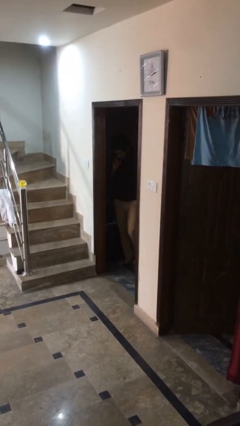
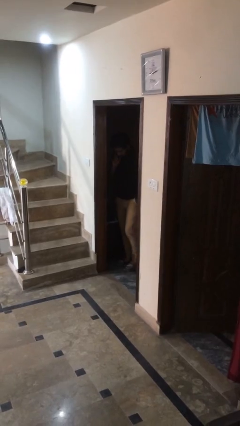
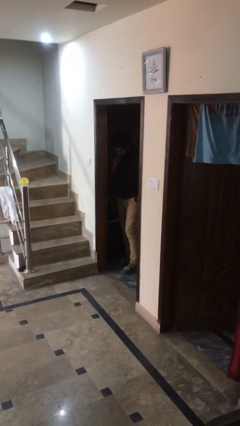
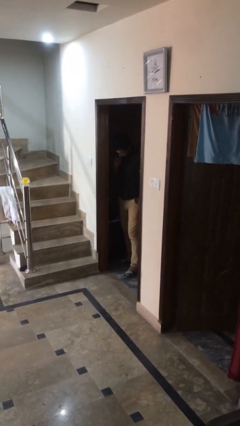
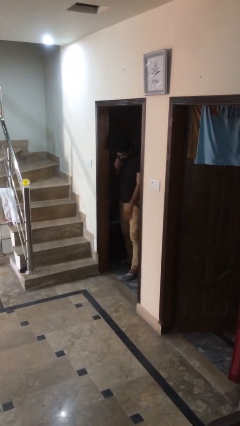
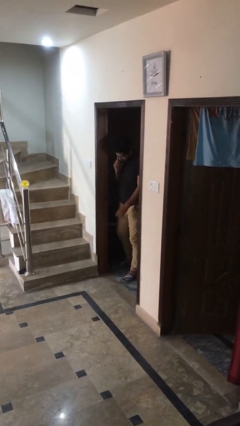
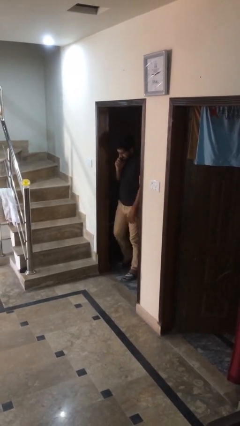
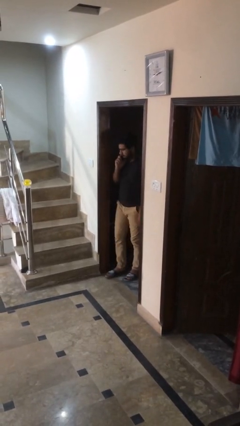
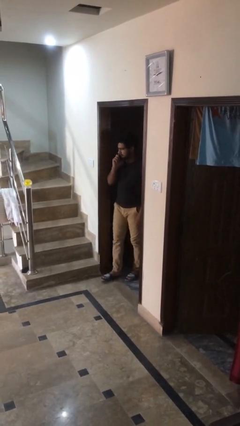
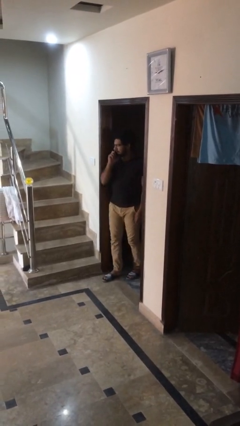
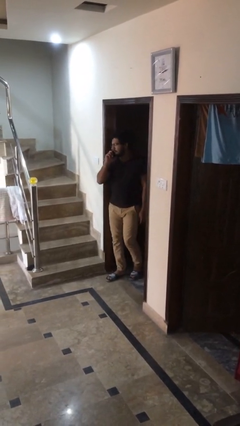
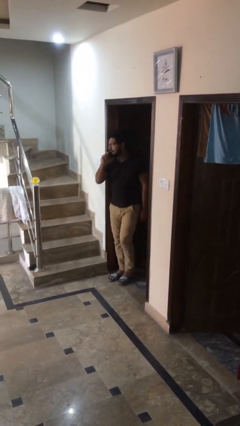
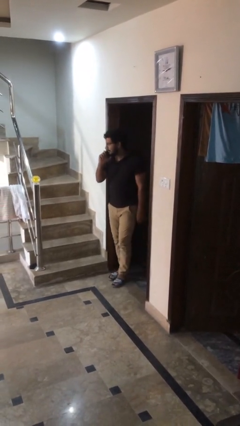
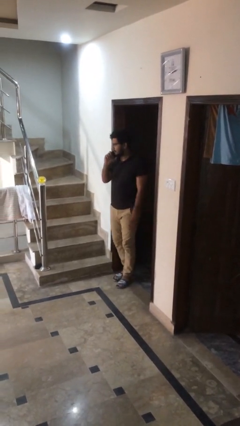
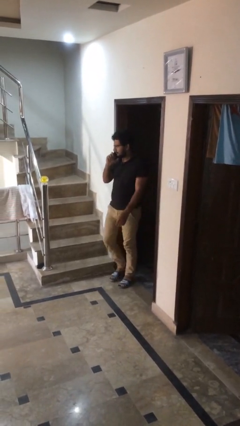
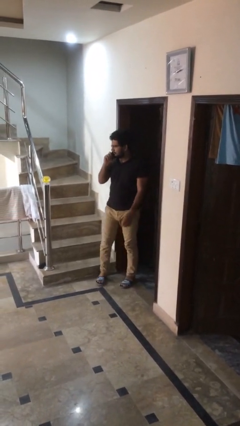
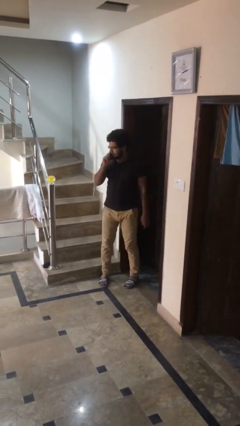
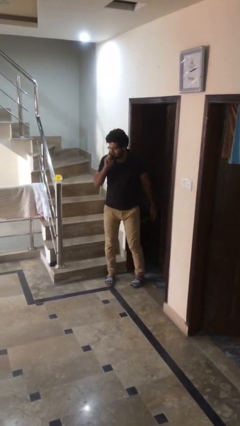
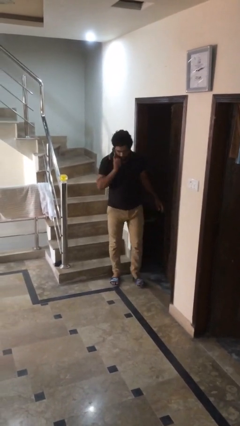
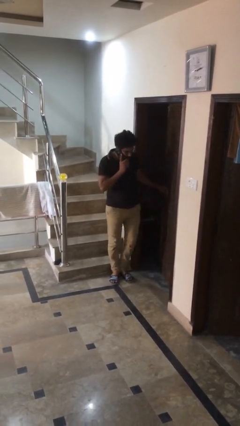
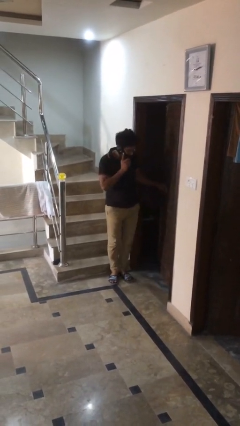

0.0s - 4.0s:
person enters scene through structure

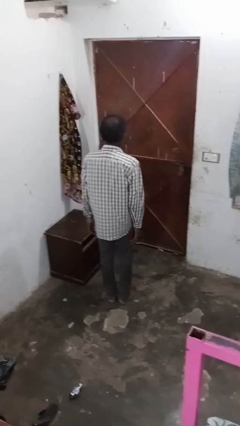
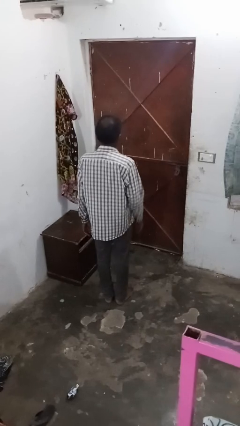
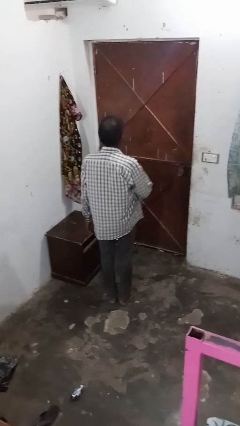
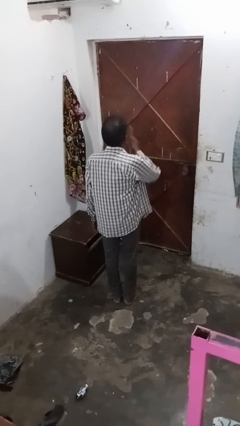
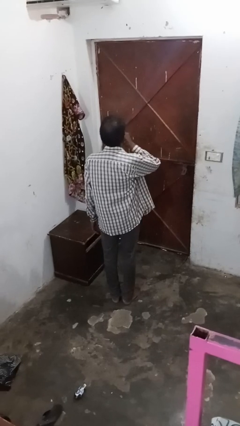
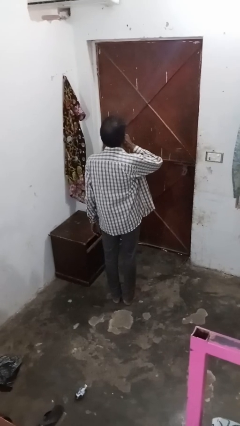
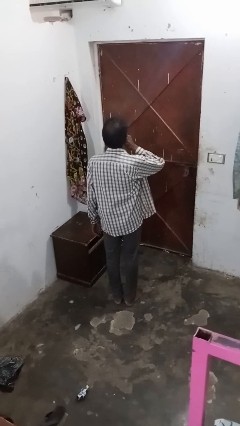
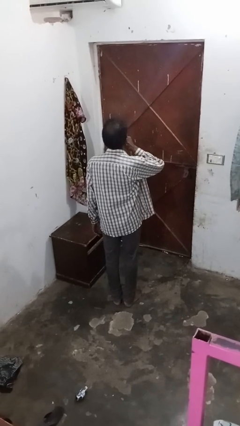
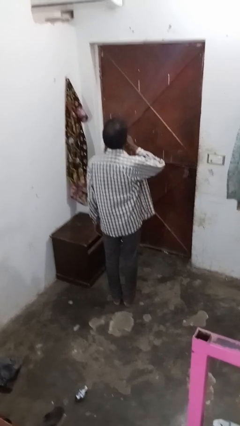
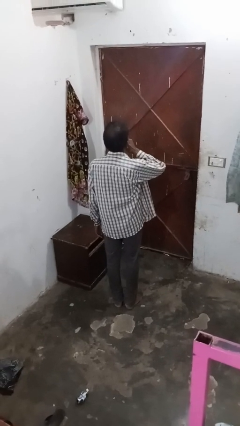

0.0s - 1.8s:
person gestures be quiet

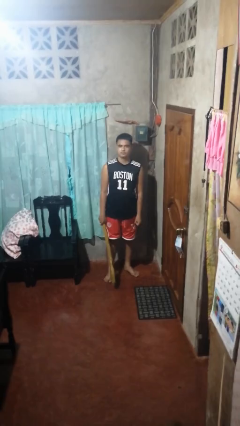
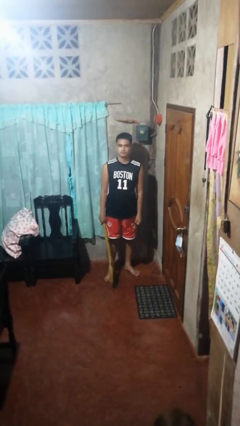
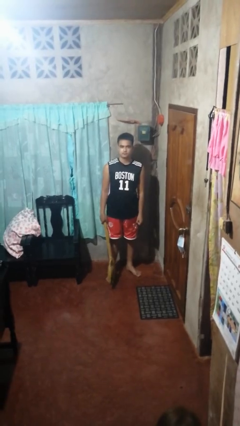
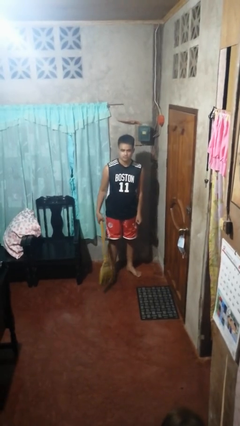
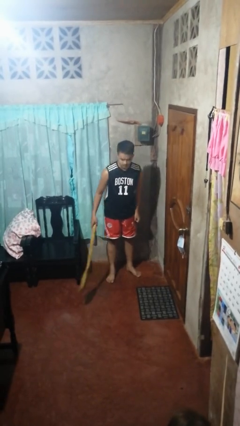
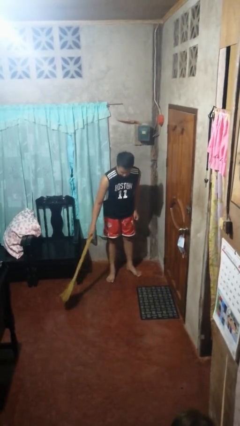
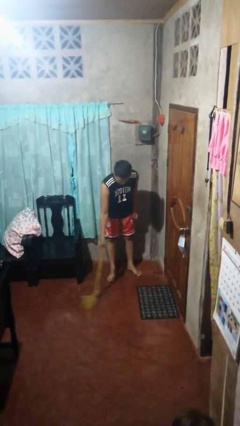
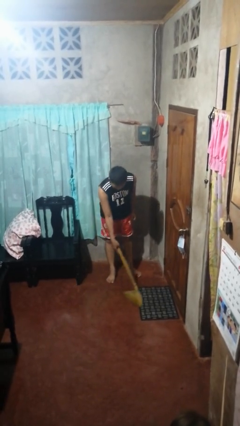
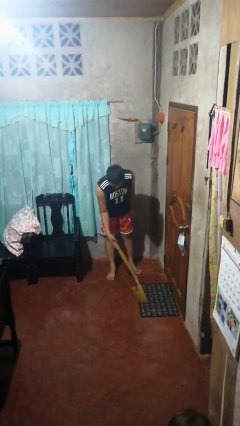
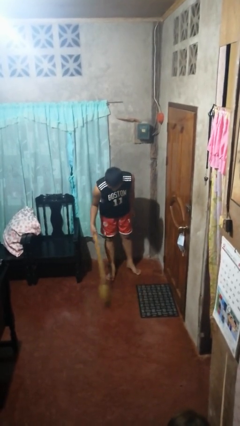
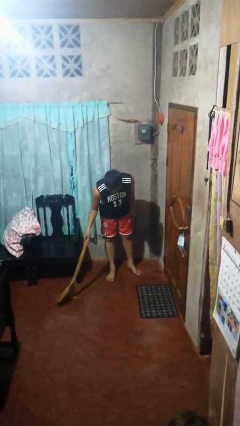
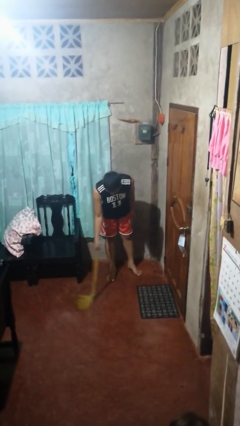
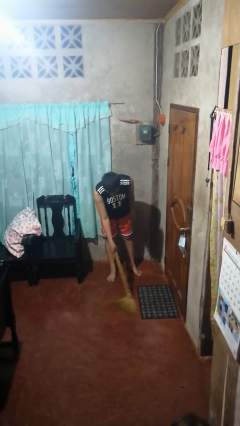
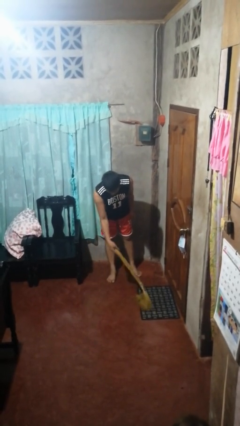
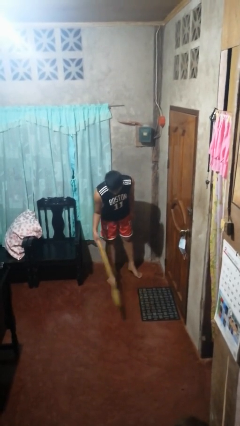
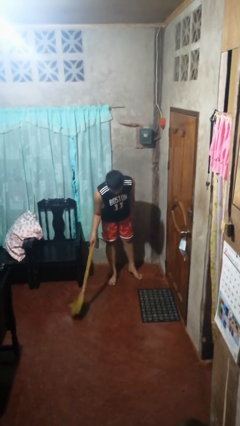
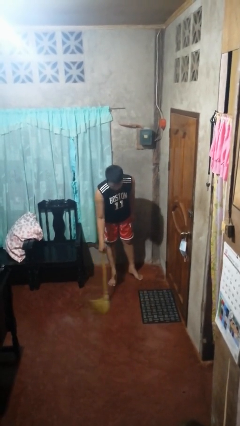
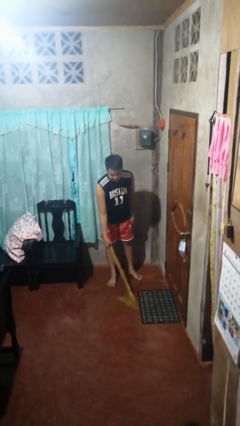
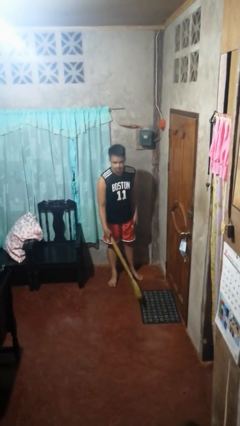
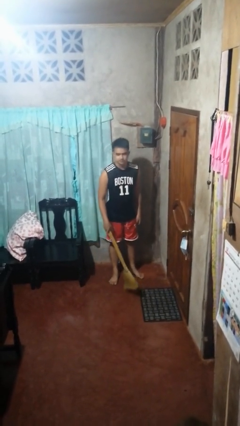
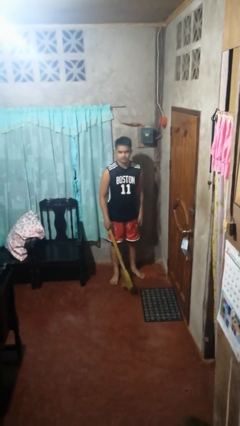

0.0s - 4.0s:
person sweeps floor

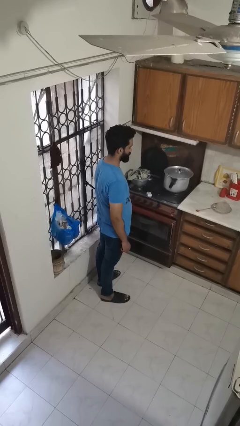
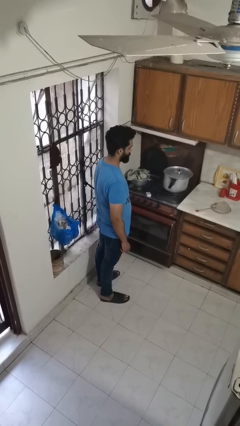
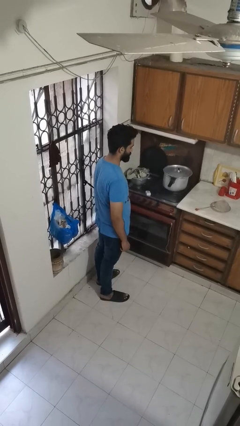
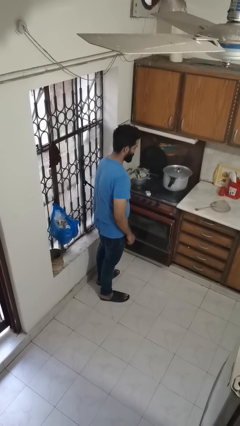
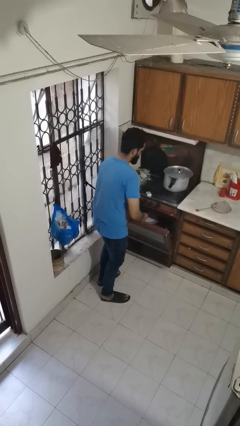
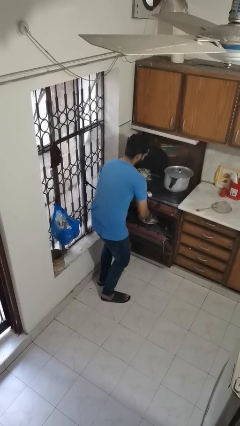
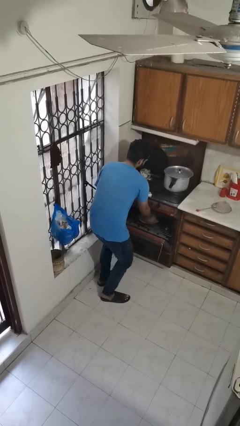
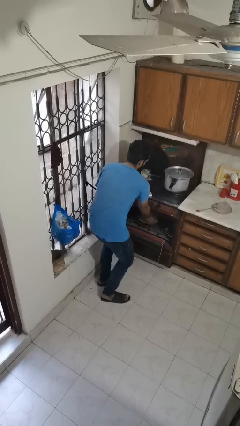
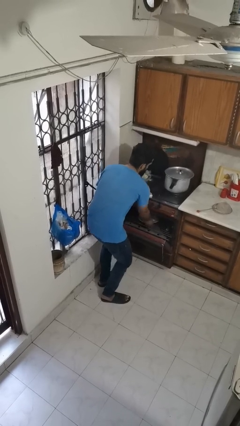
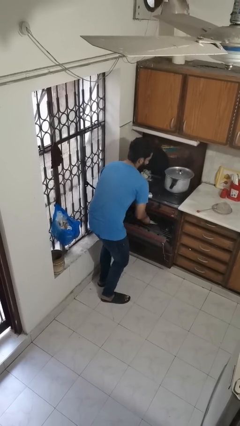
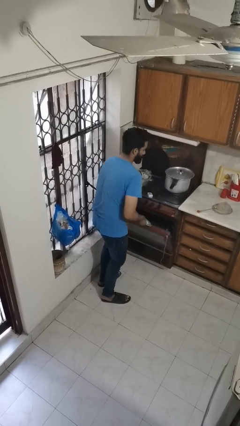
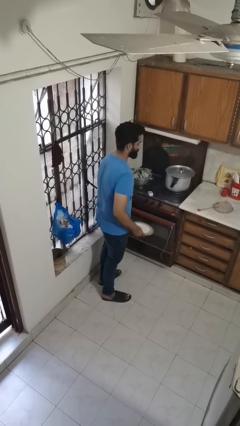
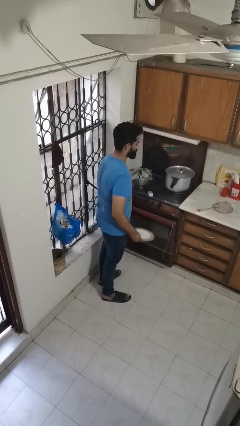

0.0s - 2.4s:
person takes object from oven

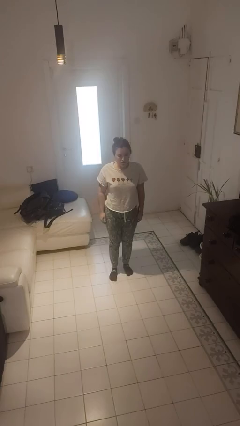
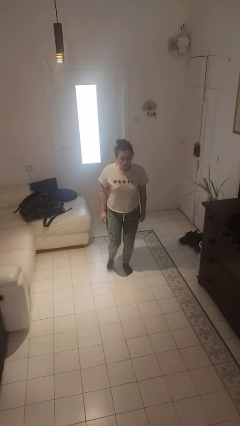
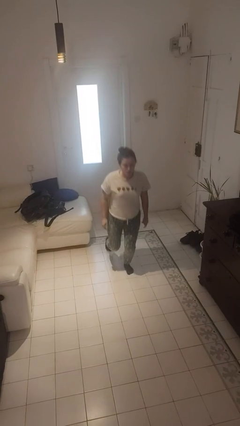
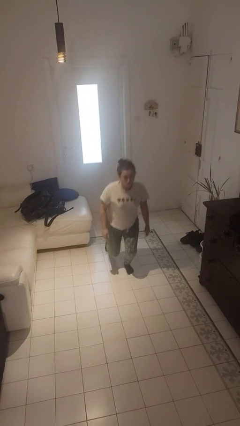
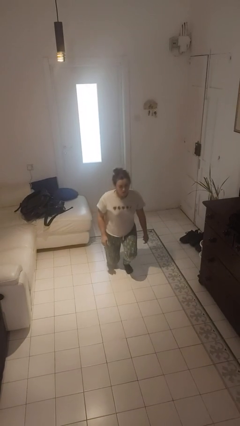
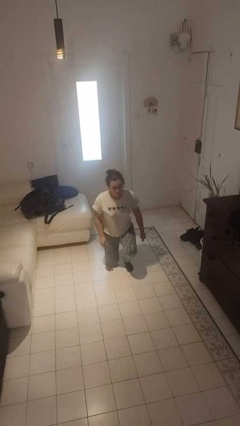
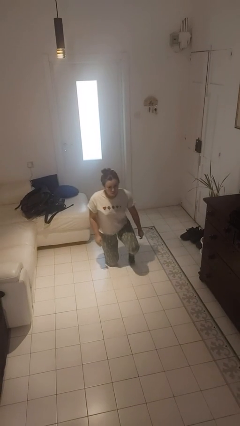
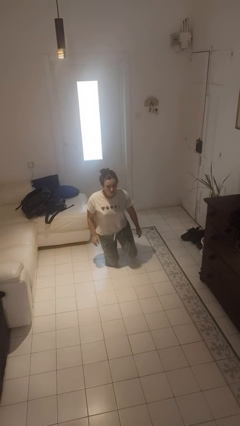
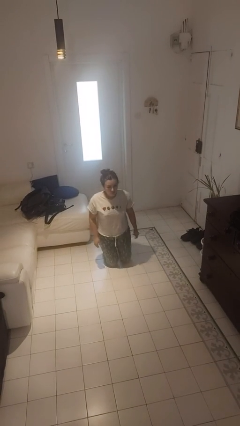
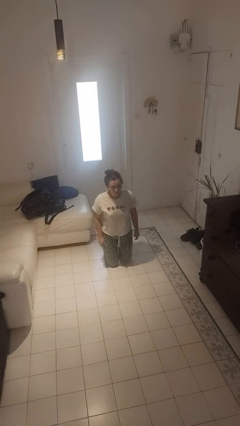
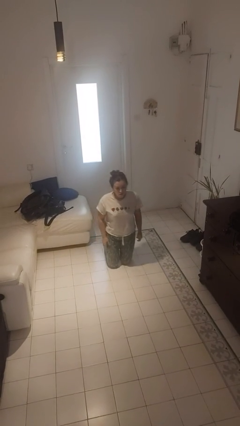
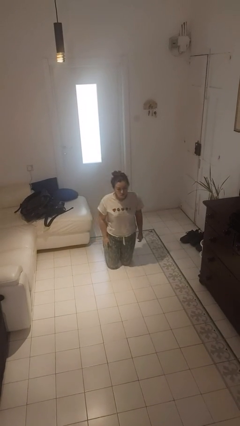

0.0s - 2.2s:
person kneels

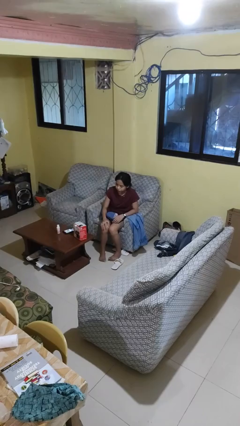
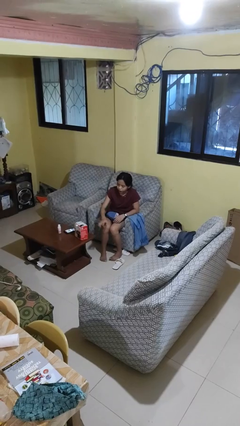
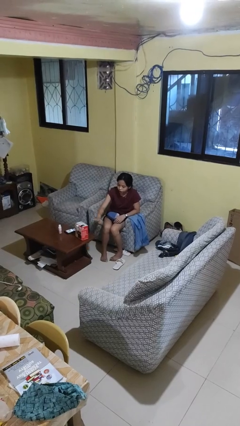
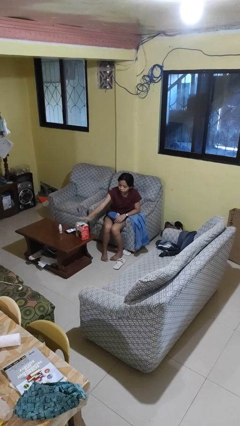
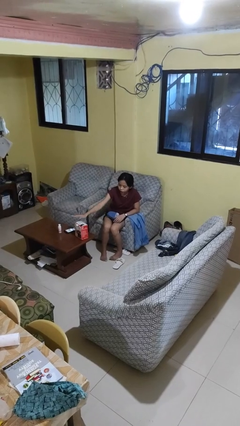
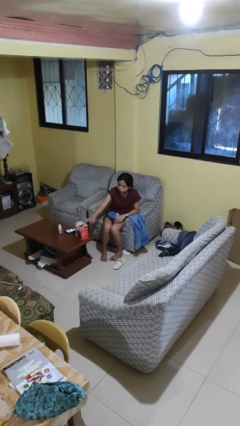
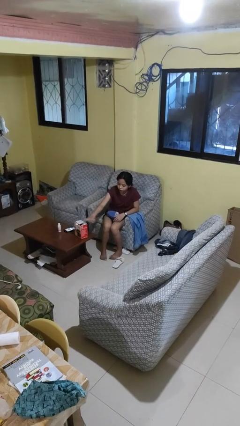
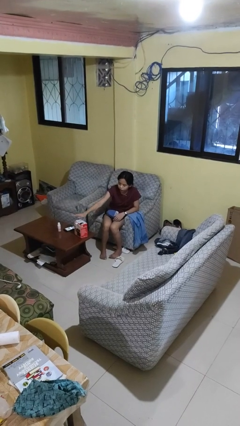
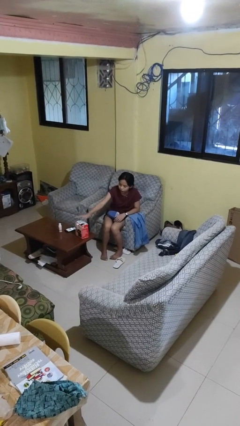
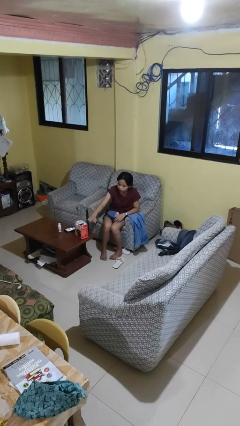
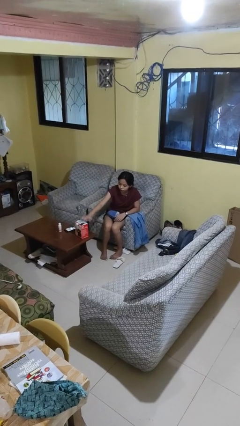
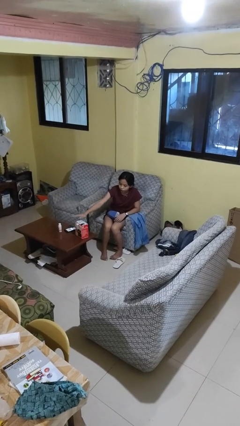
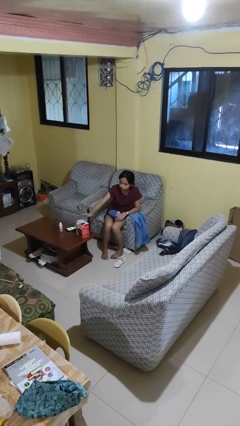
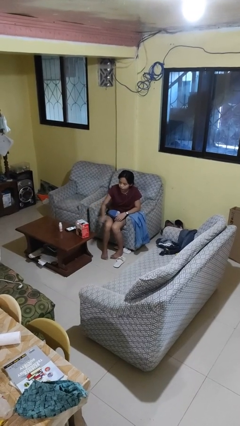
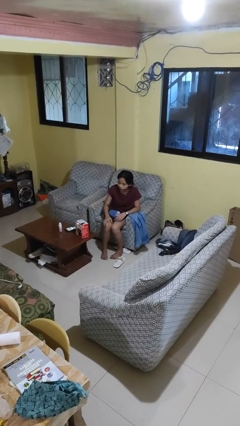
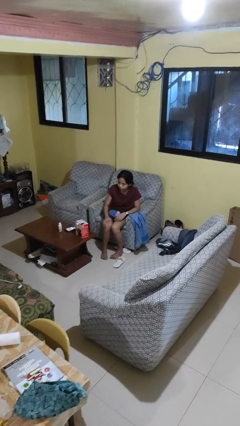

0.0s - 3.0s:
person waves hand over object

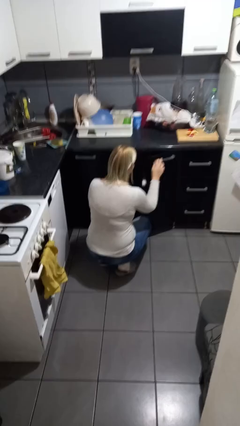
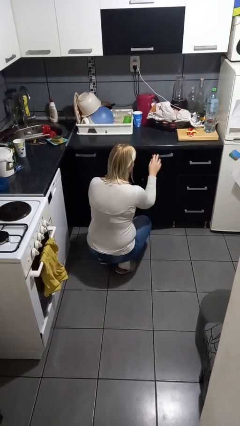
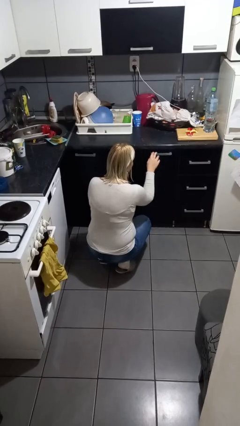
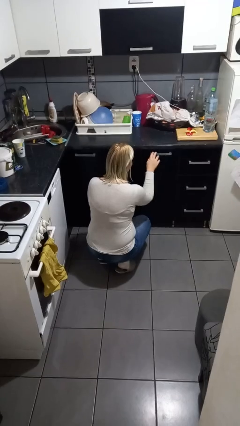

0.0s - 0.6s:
person closes cabinet
